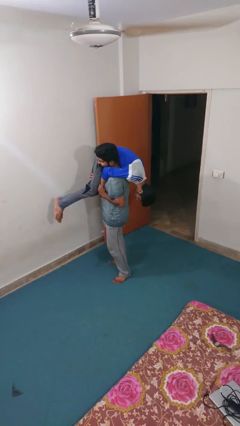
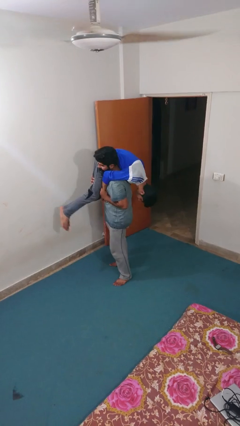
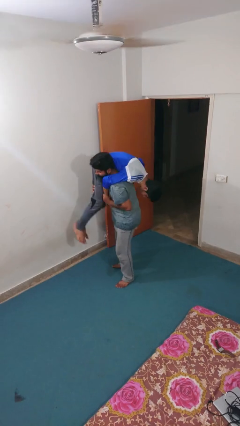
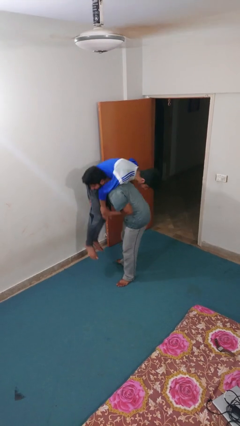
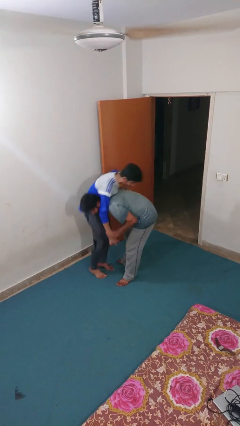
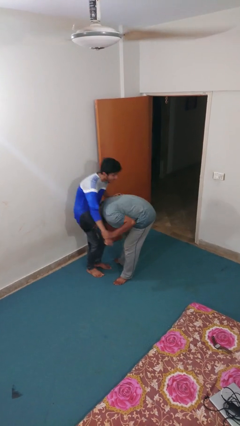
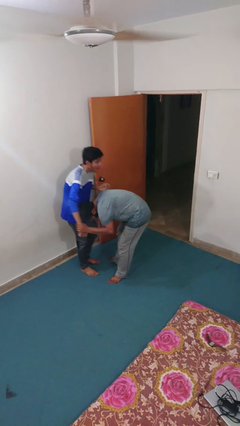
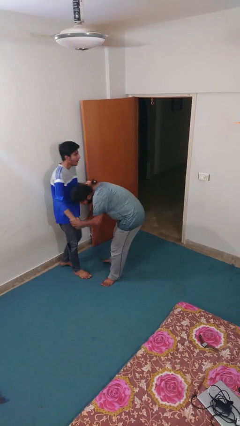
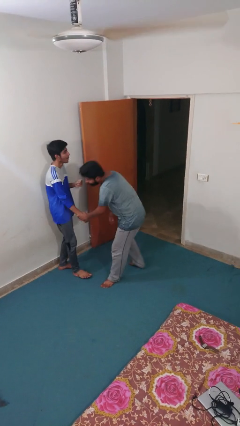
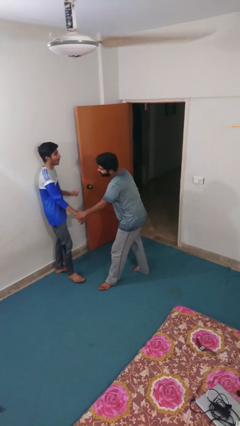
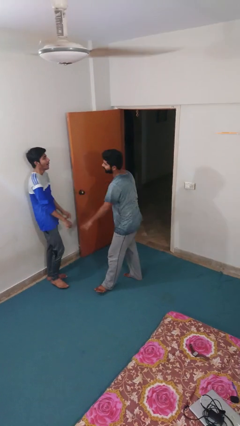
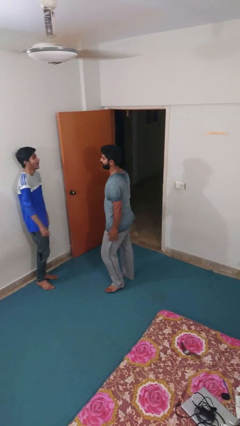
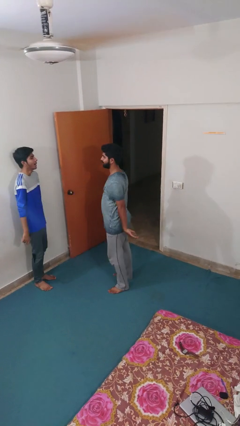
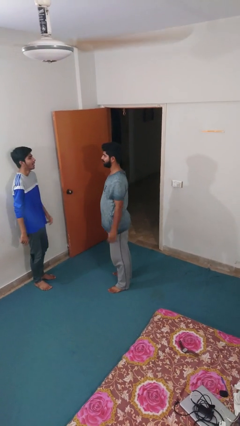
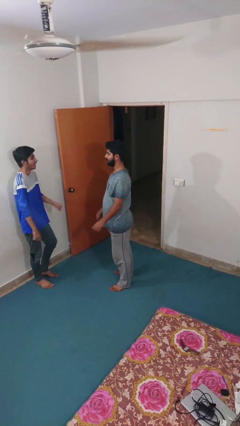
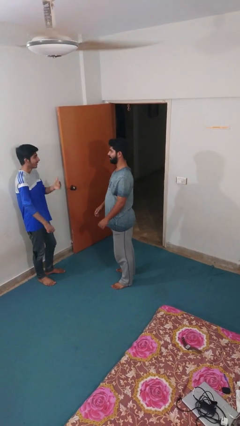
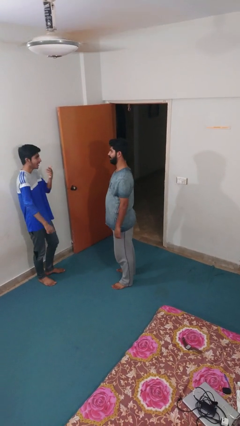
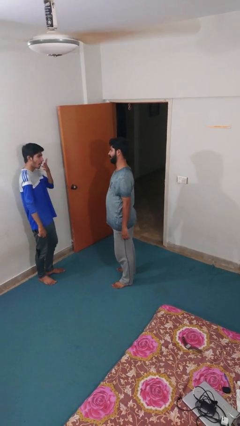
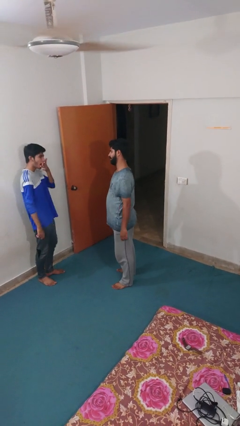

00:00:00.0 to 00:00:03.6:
person puts down person

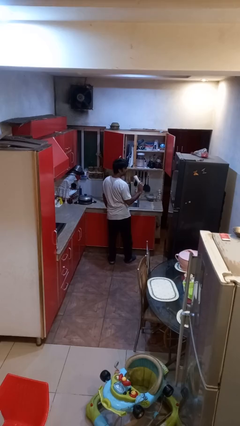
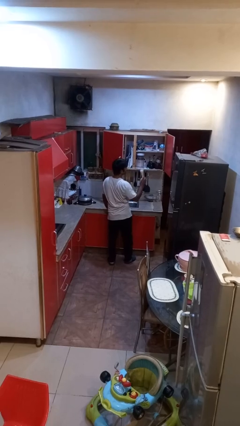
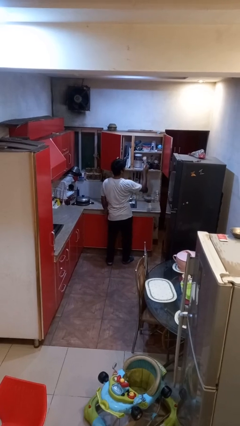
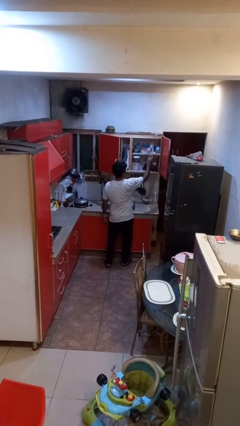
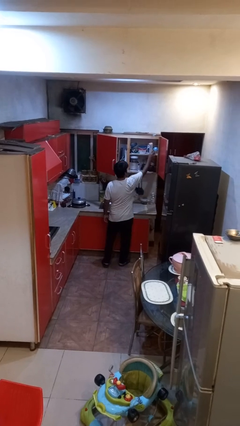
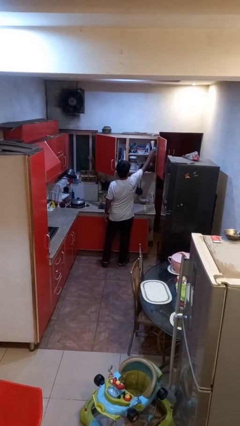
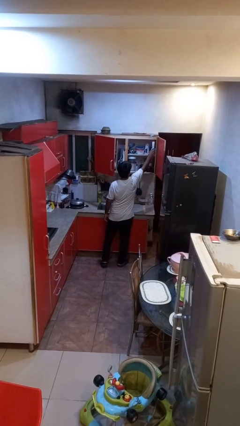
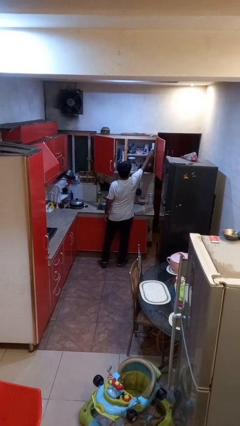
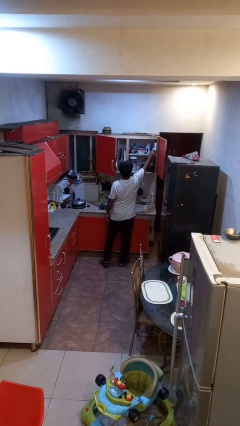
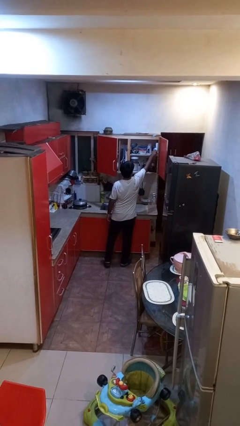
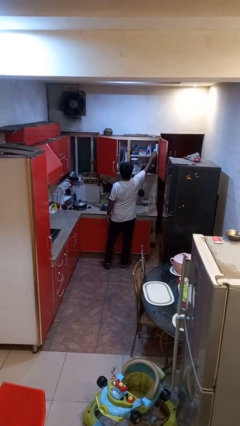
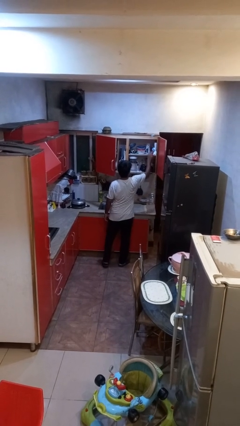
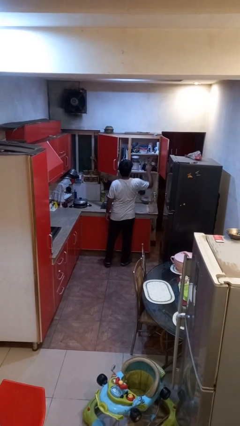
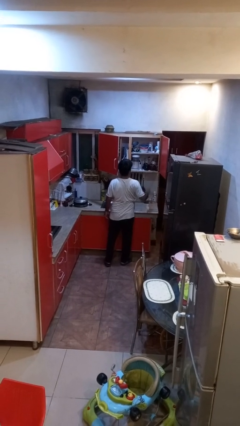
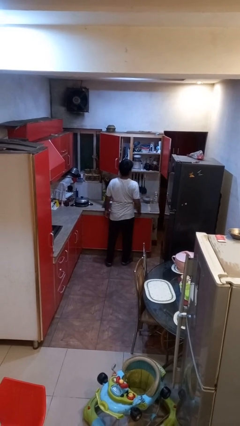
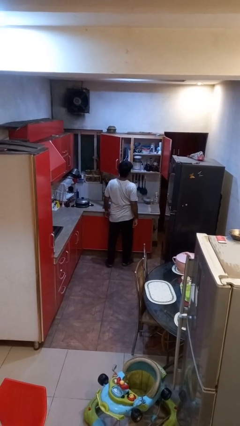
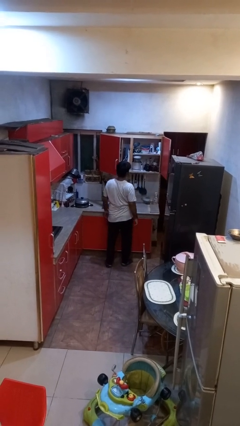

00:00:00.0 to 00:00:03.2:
person puts down object into cabinet

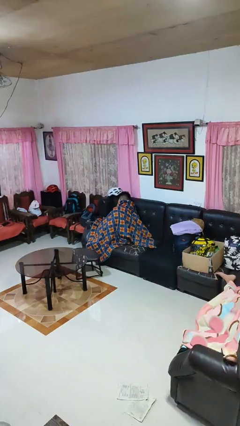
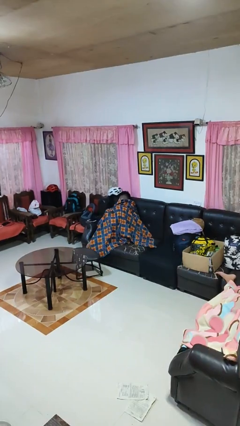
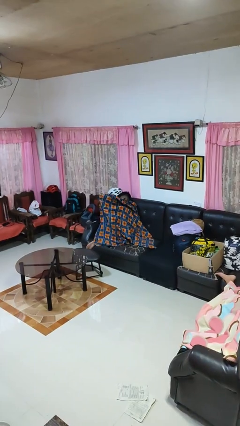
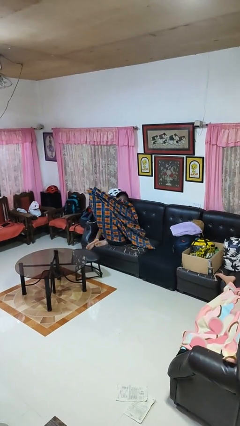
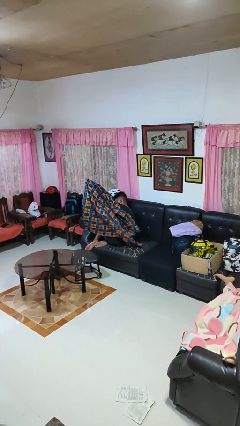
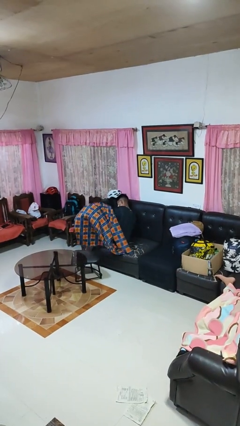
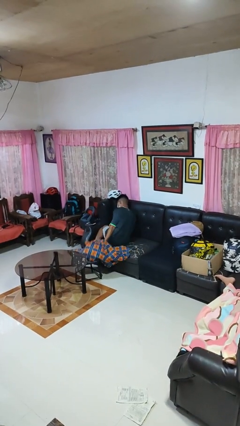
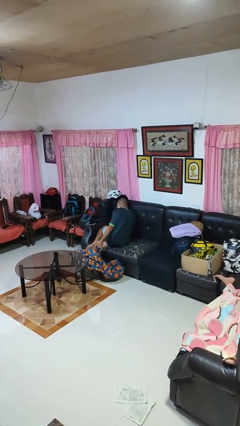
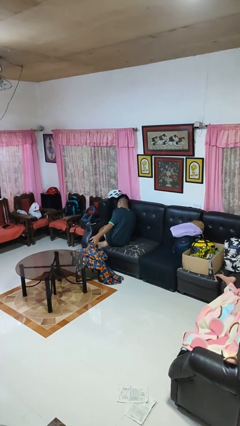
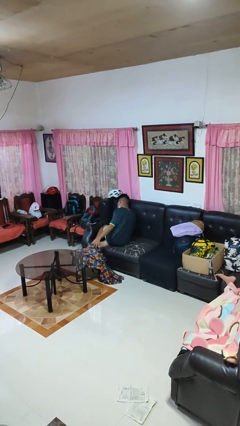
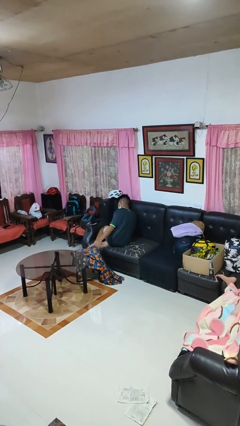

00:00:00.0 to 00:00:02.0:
person uncovers with blanket

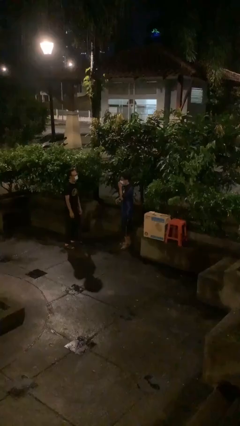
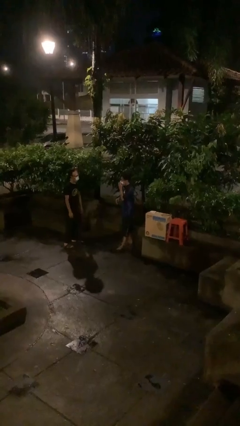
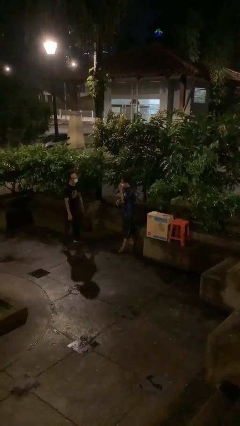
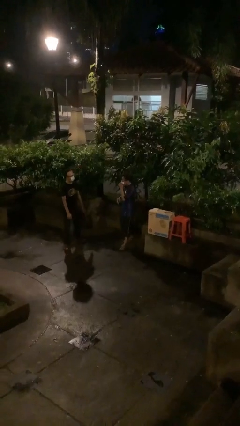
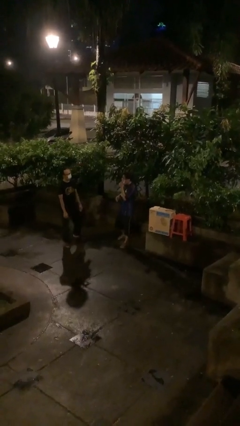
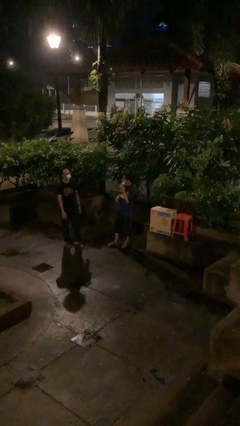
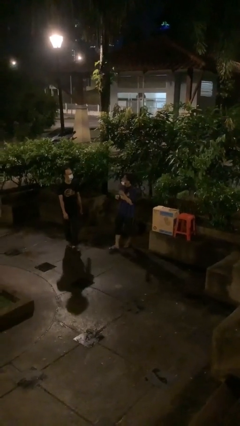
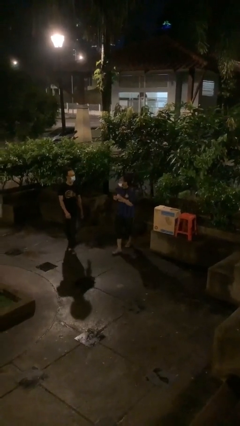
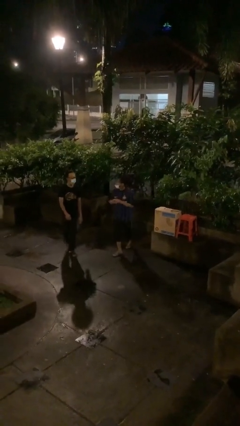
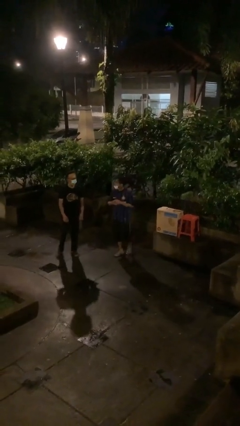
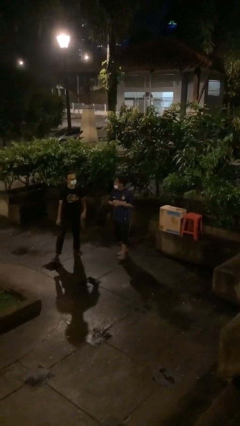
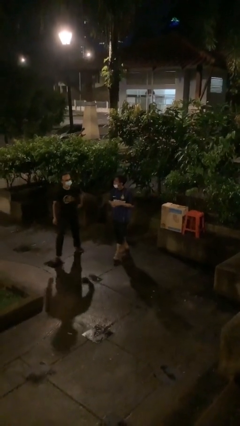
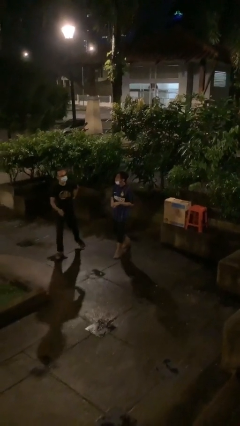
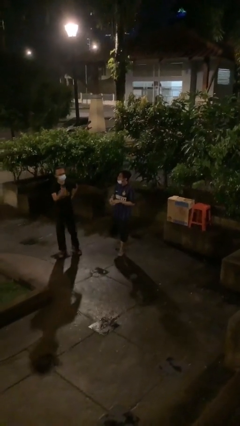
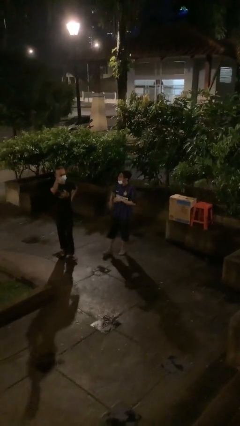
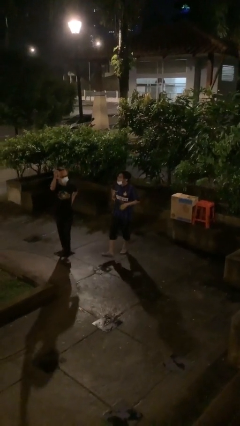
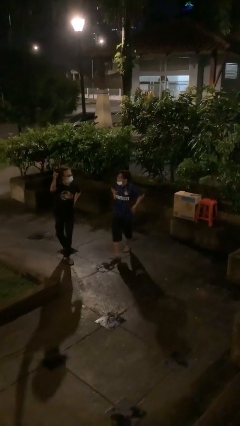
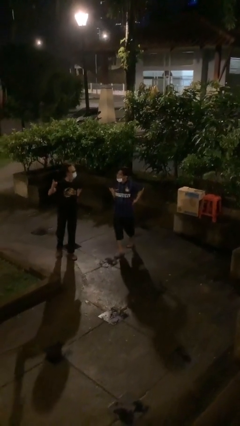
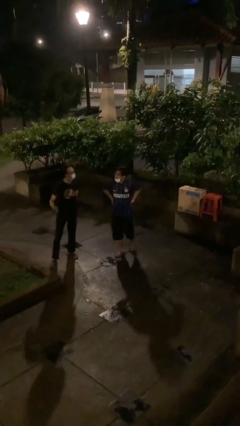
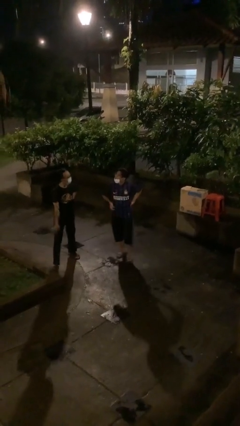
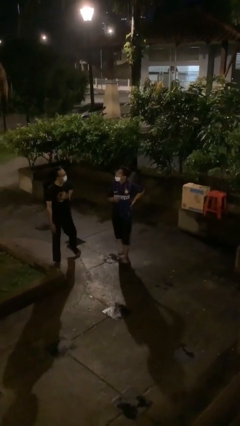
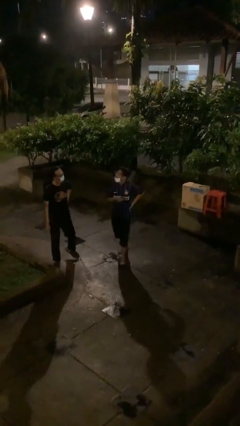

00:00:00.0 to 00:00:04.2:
person talks to person

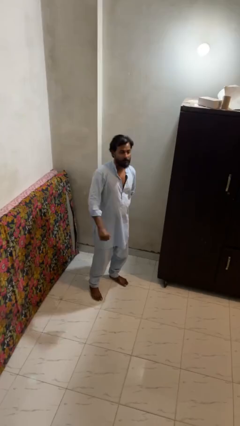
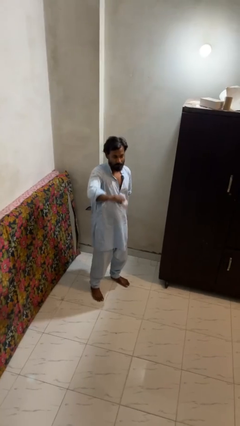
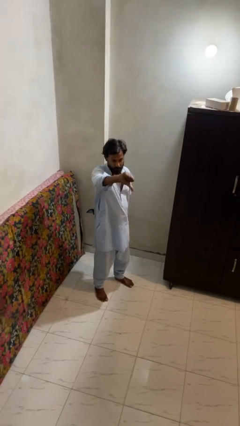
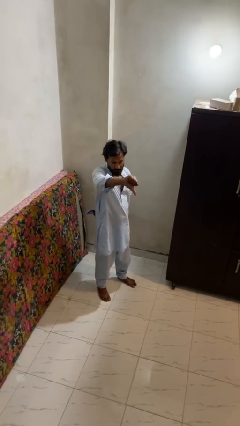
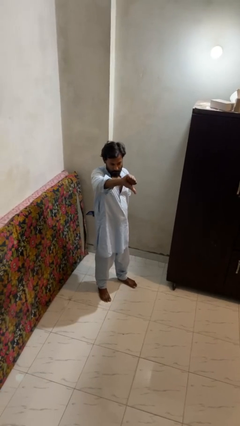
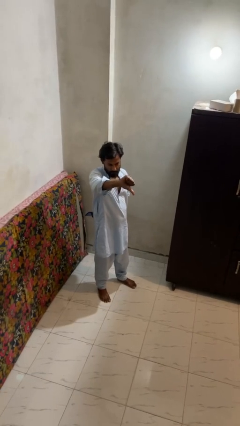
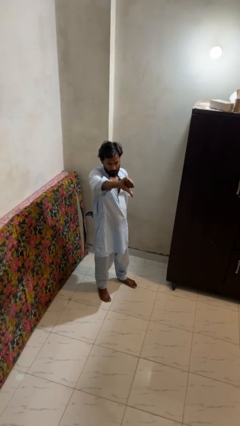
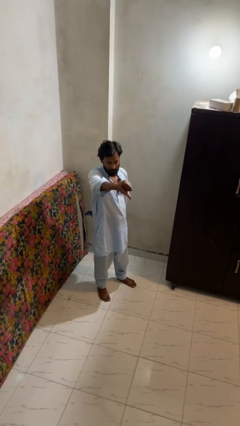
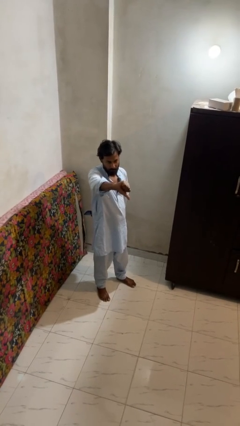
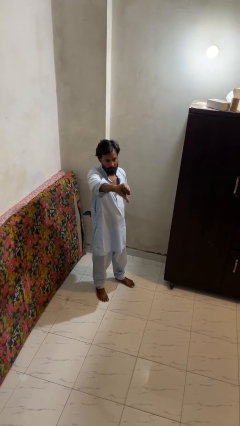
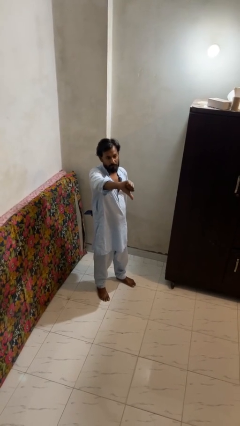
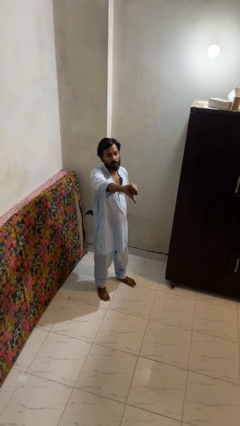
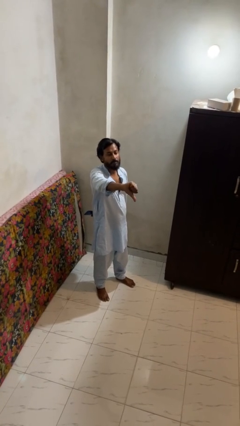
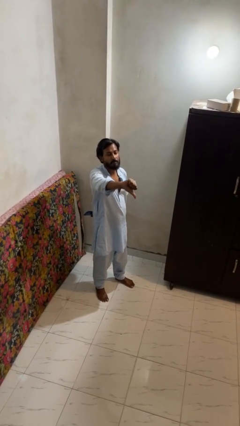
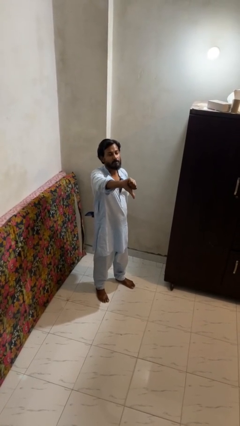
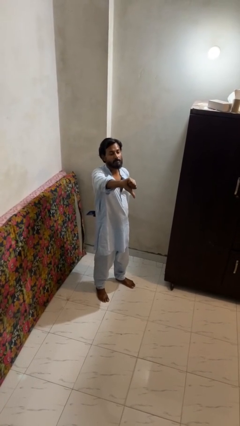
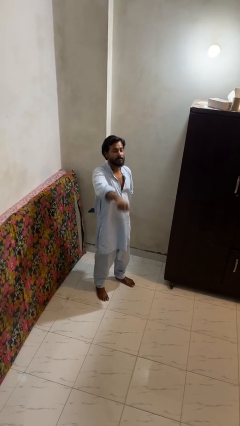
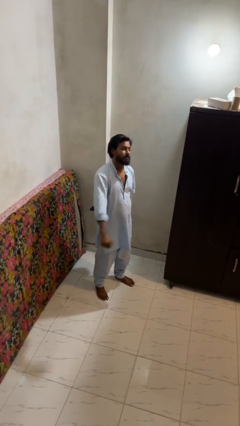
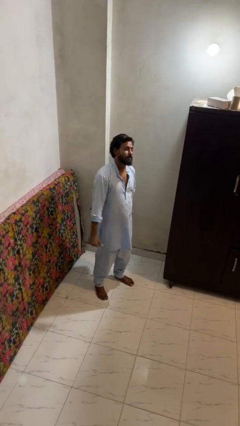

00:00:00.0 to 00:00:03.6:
person gestures thumbs down

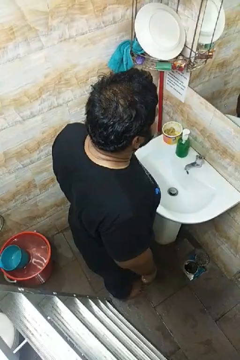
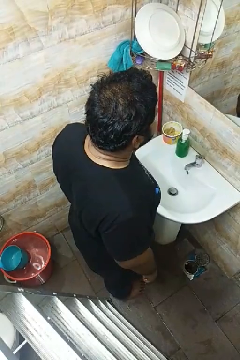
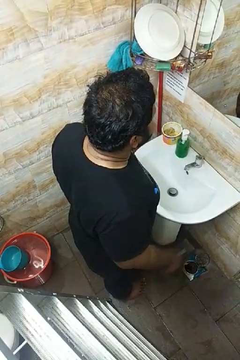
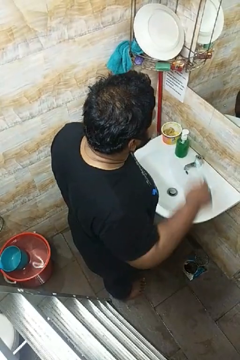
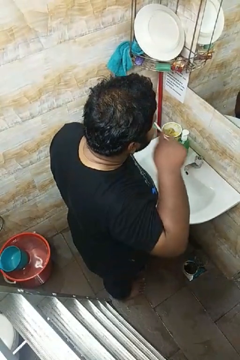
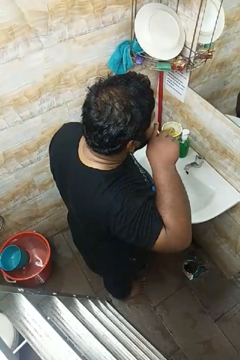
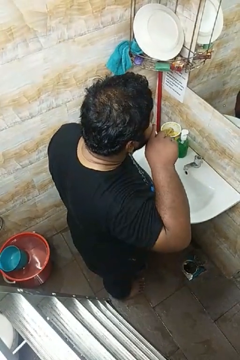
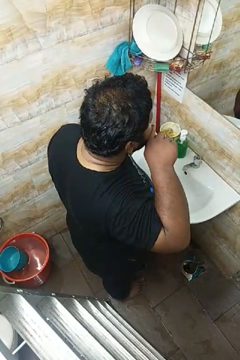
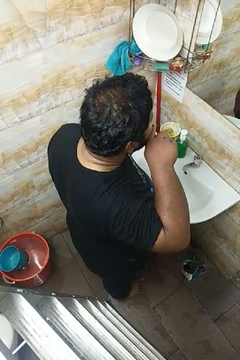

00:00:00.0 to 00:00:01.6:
person brushes teeth
